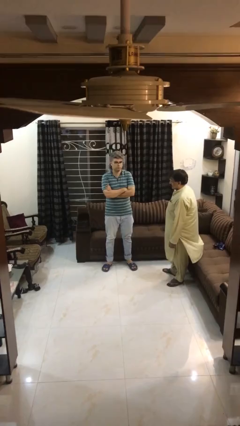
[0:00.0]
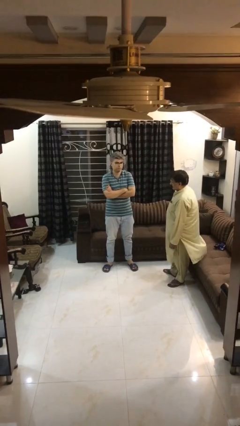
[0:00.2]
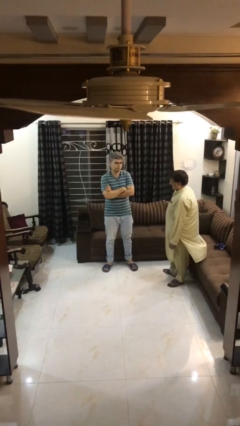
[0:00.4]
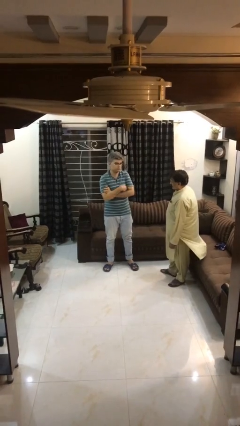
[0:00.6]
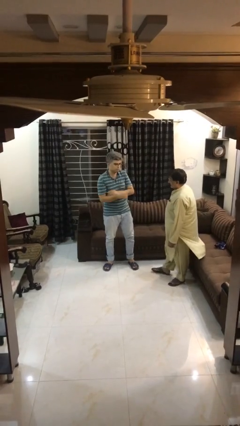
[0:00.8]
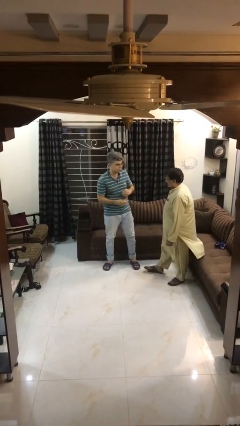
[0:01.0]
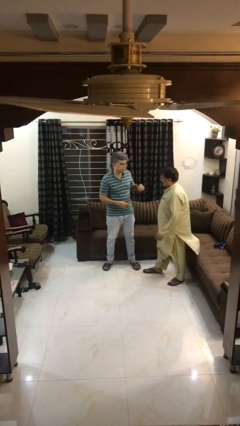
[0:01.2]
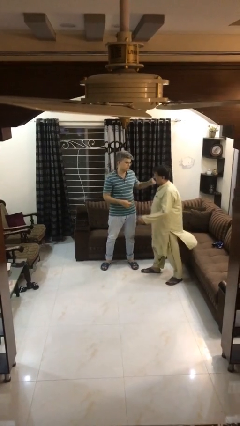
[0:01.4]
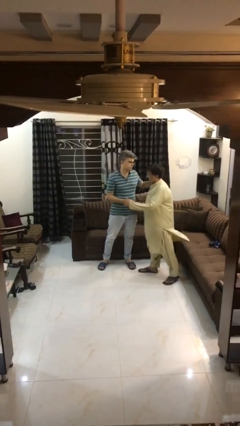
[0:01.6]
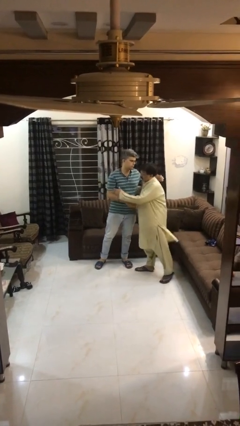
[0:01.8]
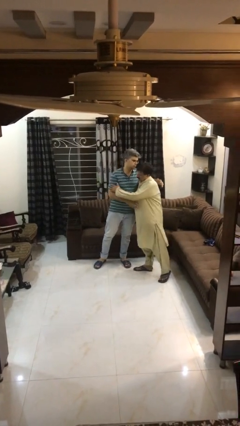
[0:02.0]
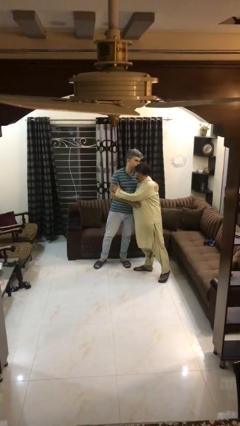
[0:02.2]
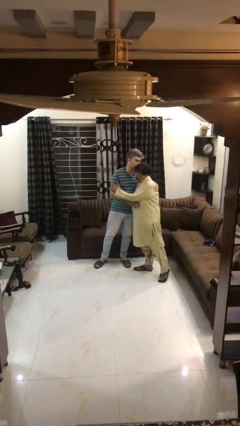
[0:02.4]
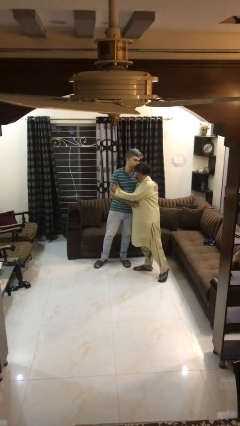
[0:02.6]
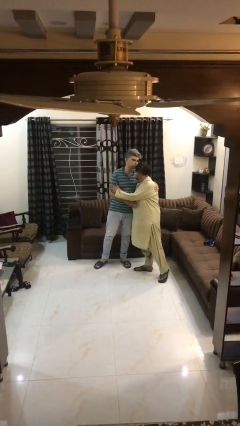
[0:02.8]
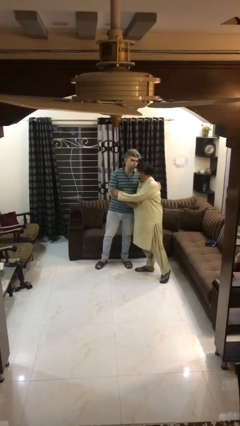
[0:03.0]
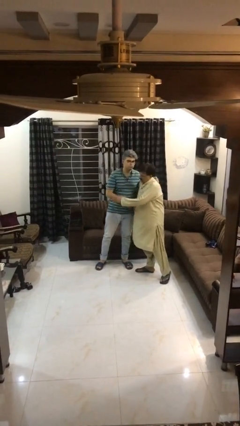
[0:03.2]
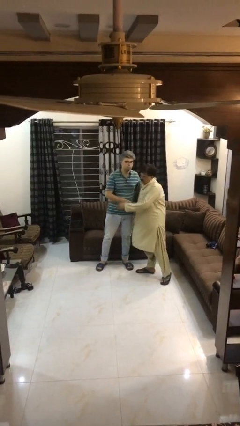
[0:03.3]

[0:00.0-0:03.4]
person embraces person

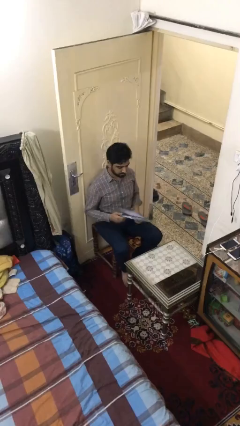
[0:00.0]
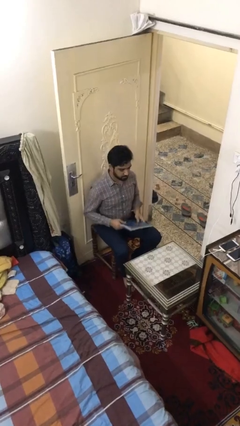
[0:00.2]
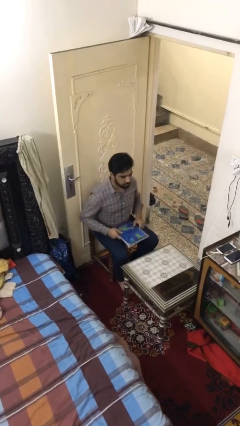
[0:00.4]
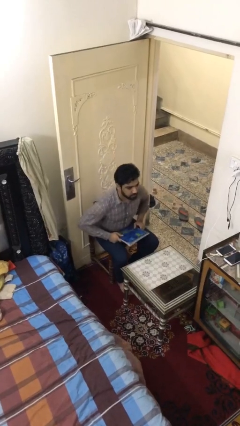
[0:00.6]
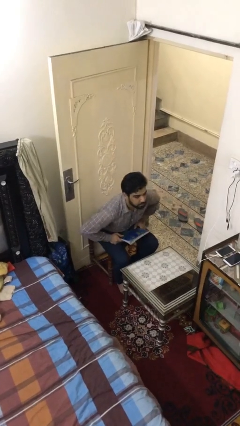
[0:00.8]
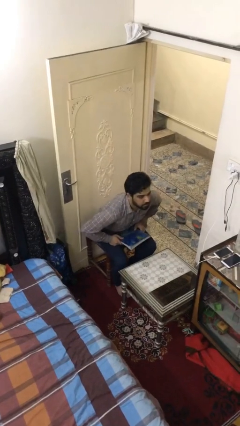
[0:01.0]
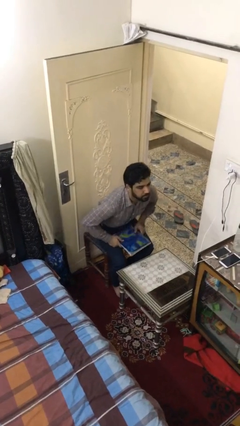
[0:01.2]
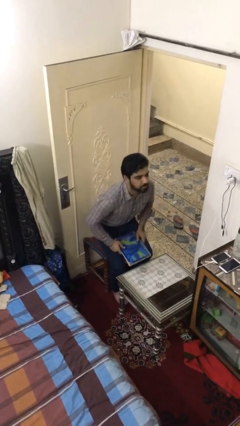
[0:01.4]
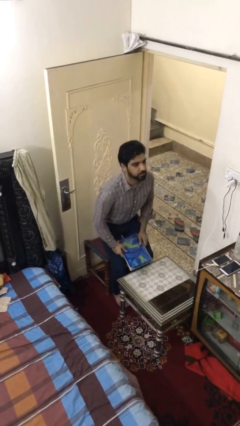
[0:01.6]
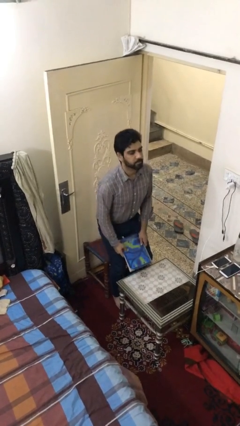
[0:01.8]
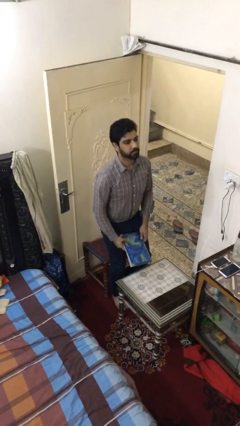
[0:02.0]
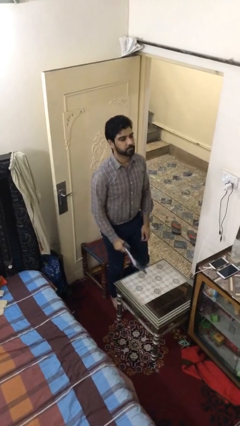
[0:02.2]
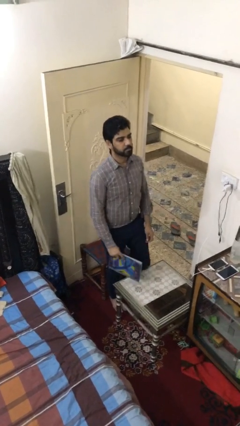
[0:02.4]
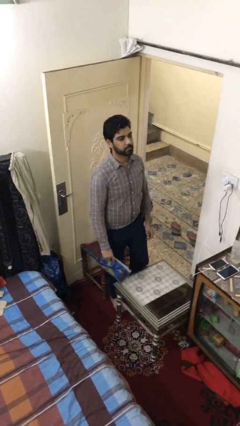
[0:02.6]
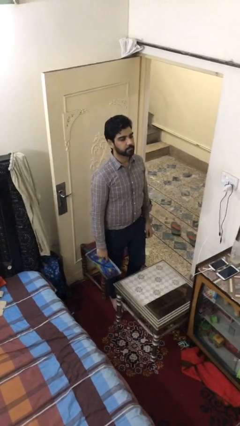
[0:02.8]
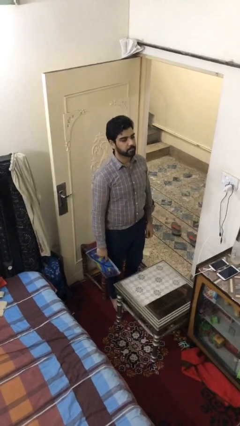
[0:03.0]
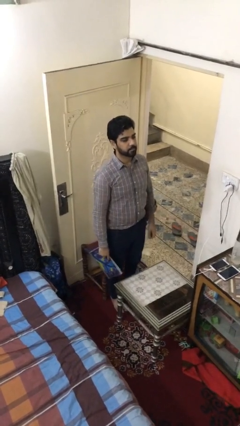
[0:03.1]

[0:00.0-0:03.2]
person stands up

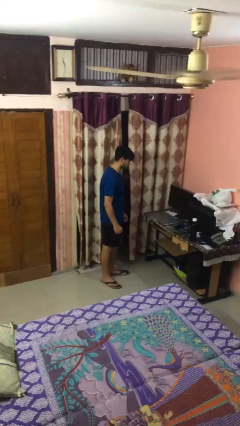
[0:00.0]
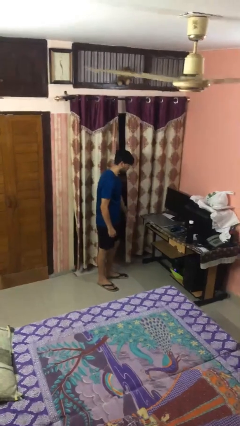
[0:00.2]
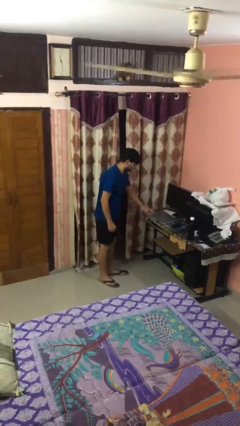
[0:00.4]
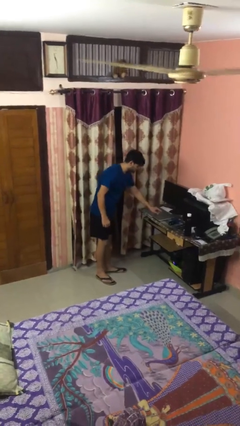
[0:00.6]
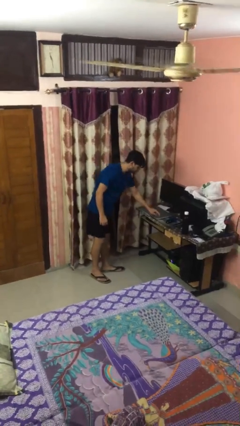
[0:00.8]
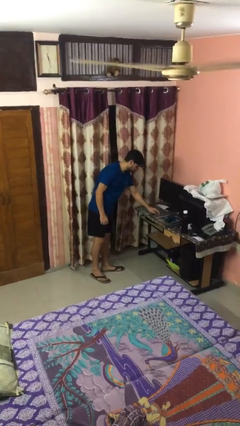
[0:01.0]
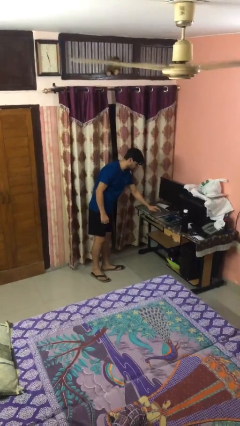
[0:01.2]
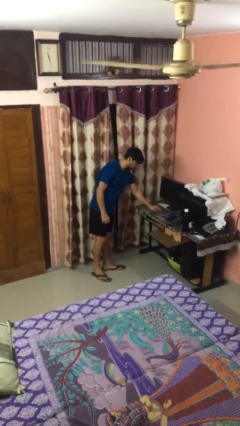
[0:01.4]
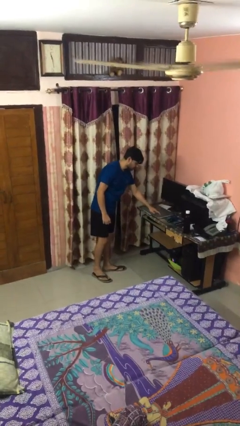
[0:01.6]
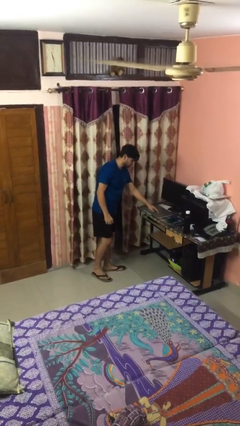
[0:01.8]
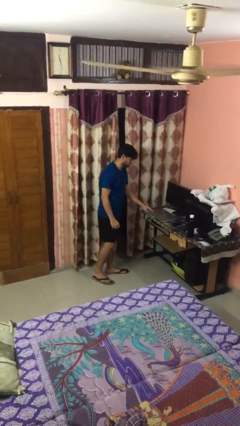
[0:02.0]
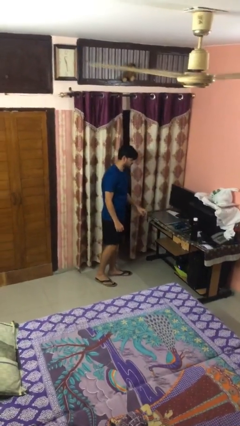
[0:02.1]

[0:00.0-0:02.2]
person taps object with finger

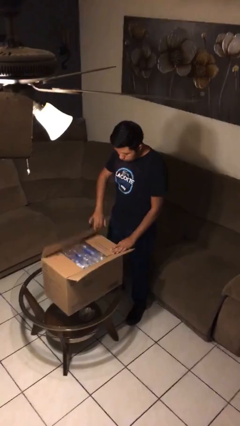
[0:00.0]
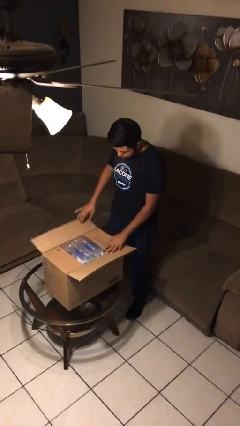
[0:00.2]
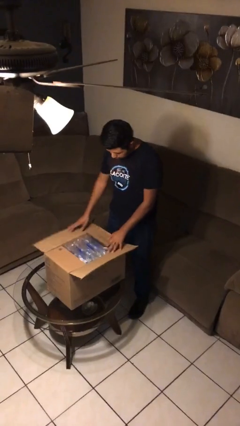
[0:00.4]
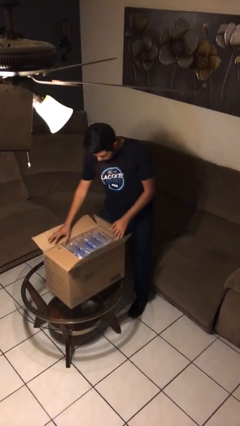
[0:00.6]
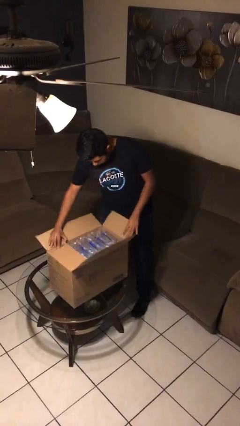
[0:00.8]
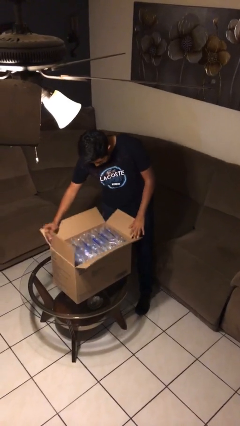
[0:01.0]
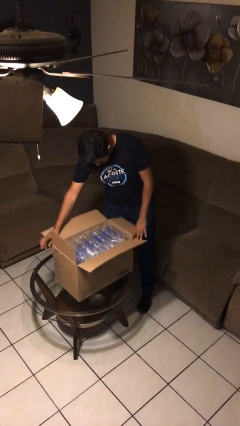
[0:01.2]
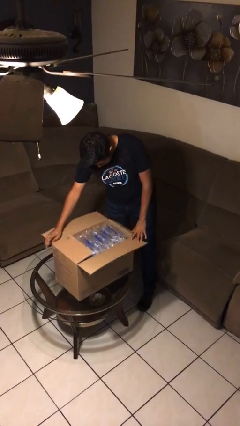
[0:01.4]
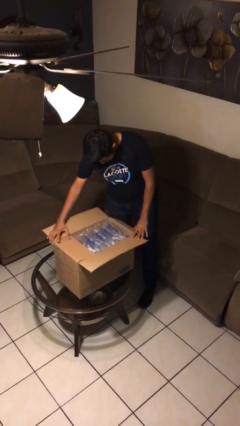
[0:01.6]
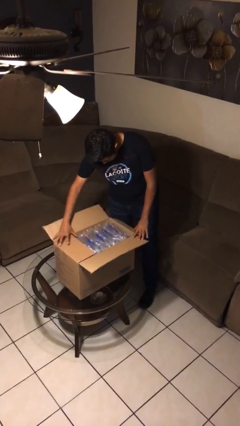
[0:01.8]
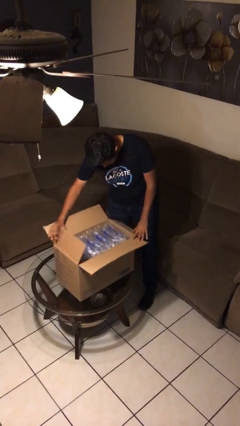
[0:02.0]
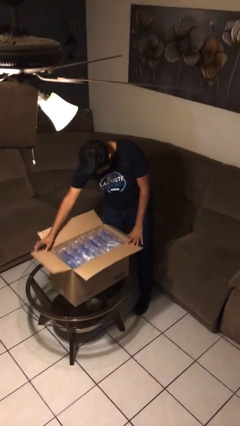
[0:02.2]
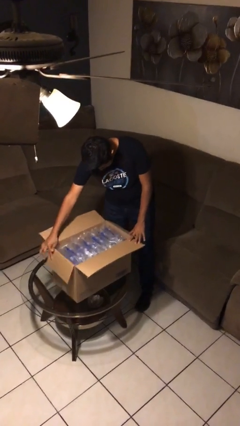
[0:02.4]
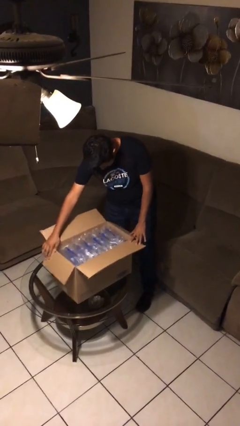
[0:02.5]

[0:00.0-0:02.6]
person opens box

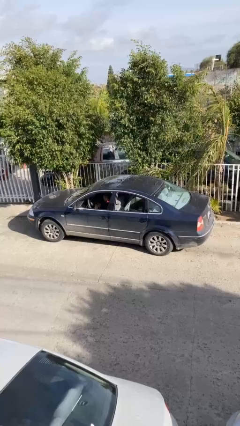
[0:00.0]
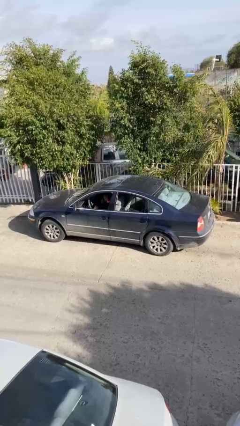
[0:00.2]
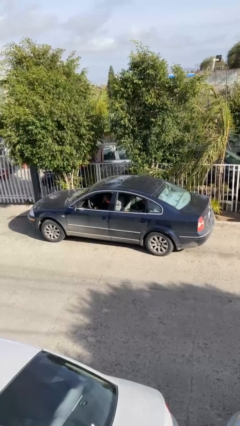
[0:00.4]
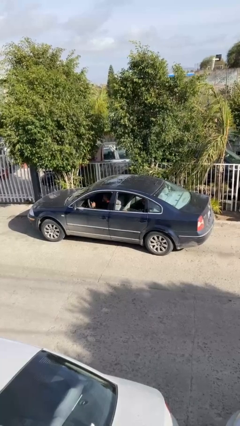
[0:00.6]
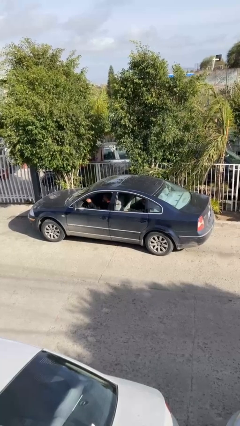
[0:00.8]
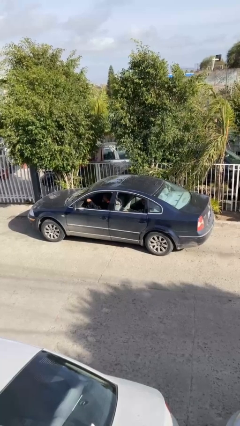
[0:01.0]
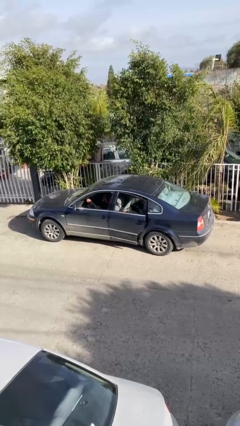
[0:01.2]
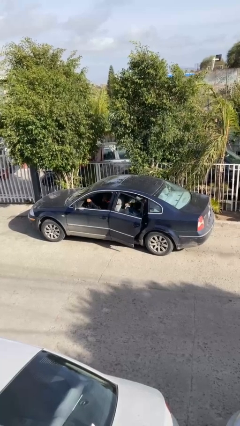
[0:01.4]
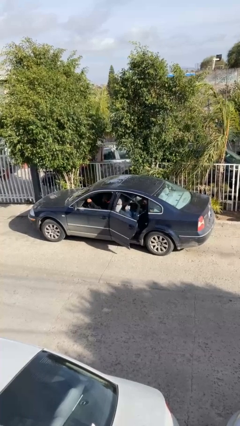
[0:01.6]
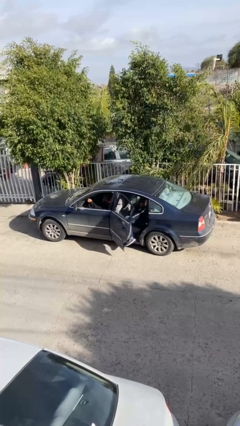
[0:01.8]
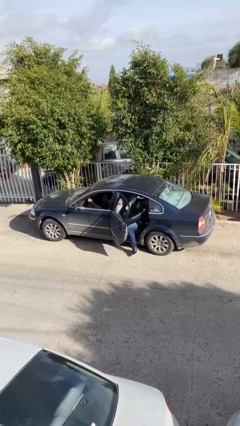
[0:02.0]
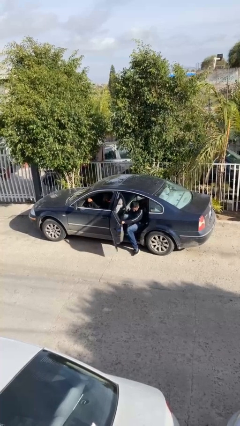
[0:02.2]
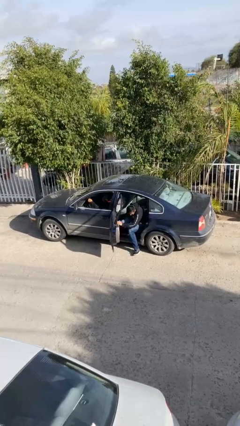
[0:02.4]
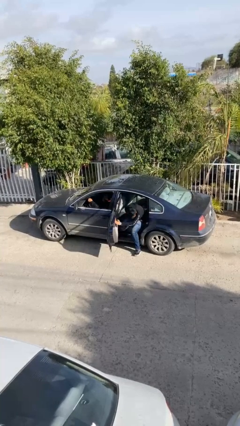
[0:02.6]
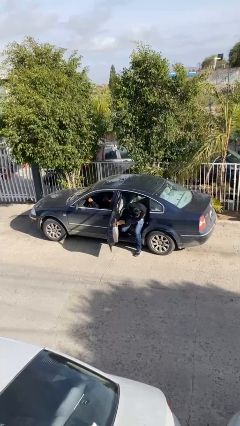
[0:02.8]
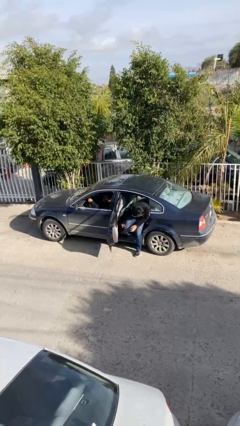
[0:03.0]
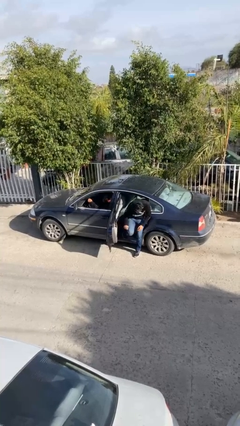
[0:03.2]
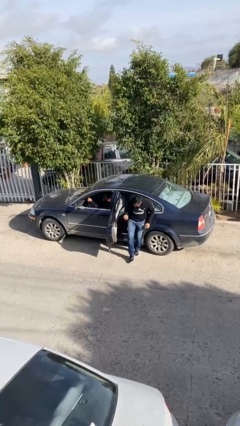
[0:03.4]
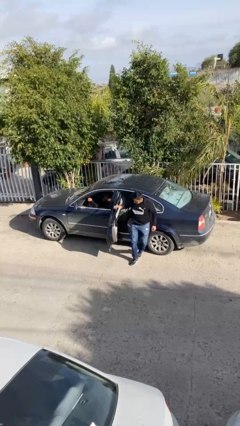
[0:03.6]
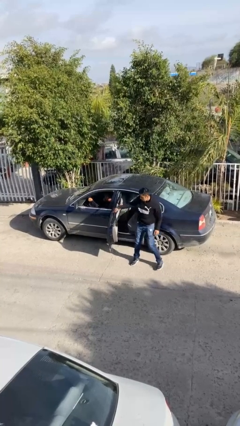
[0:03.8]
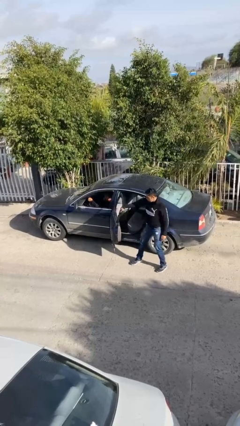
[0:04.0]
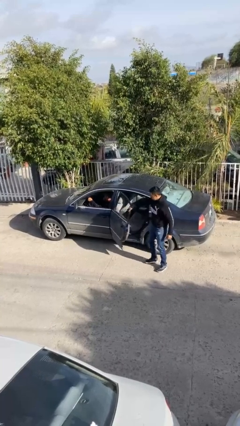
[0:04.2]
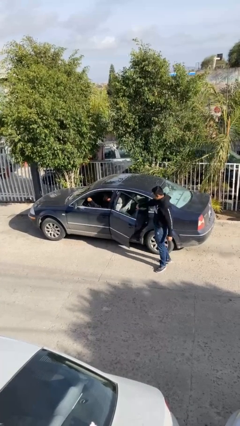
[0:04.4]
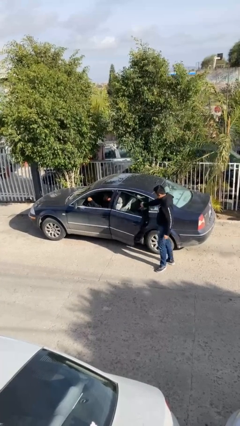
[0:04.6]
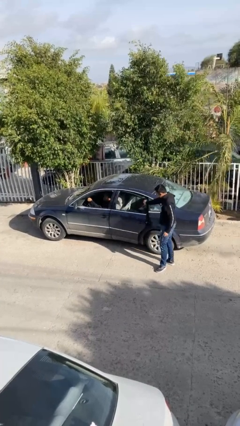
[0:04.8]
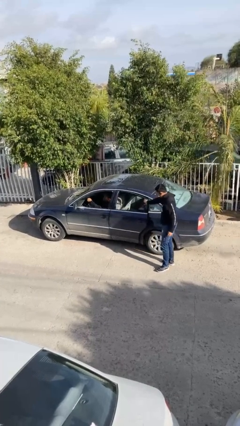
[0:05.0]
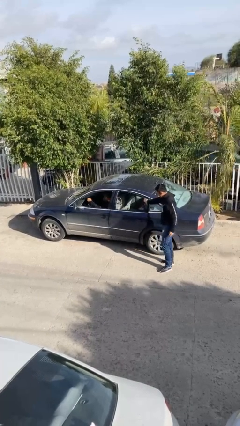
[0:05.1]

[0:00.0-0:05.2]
car drops off person

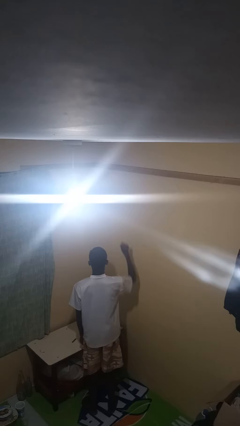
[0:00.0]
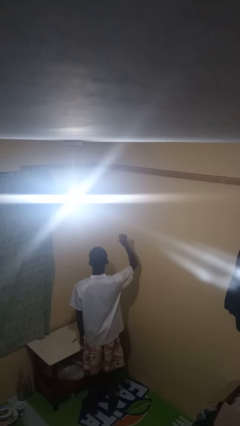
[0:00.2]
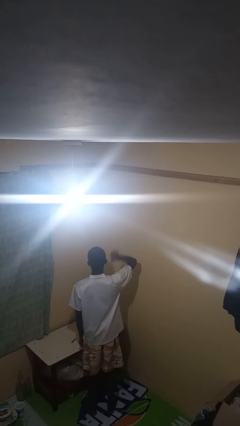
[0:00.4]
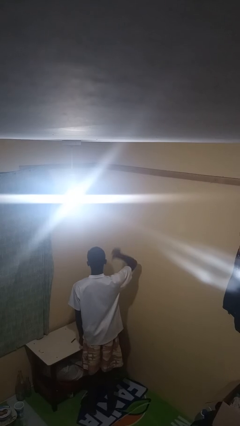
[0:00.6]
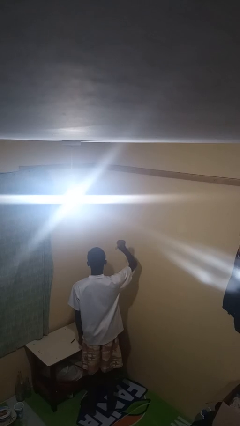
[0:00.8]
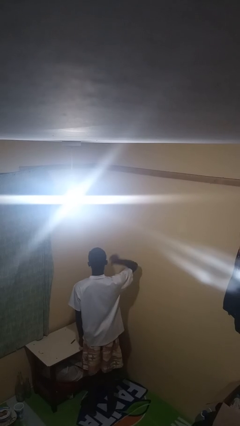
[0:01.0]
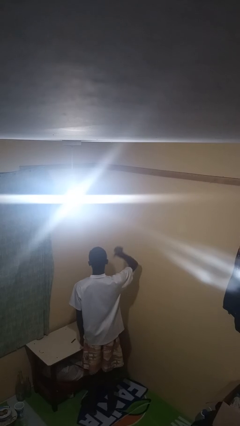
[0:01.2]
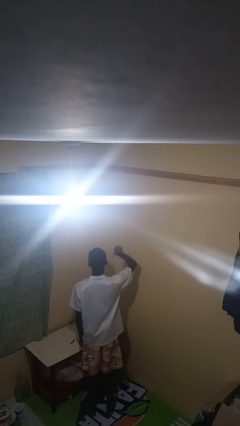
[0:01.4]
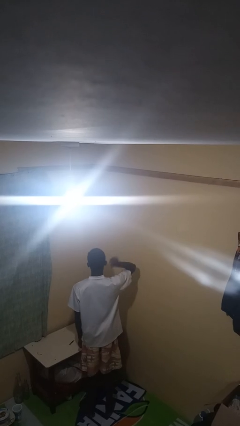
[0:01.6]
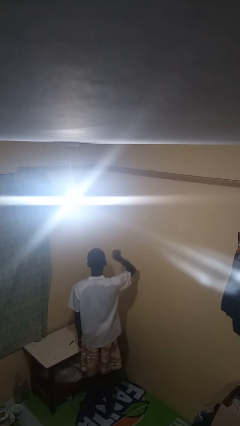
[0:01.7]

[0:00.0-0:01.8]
person gestures behind me
